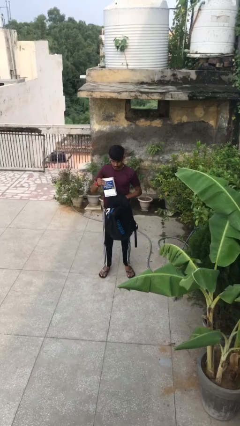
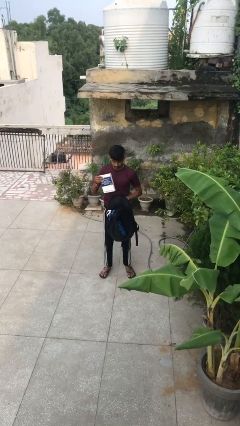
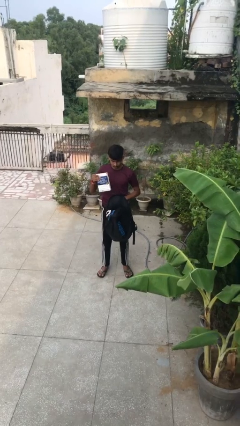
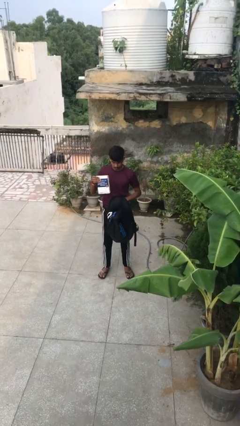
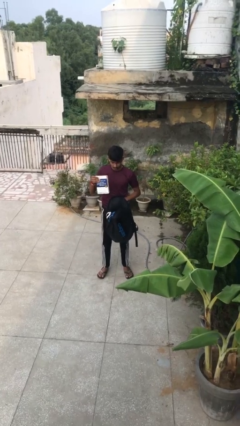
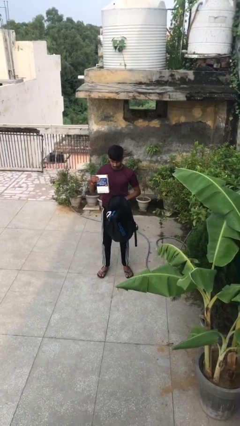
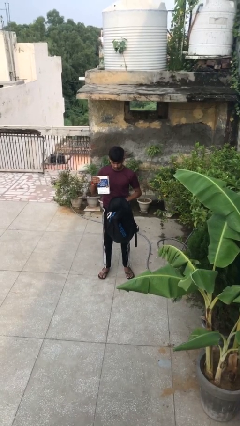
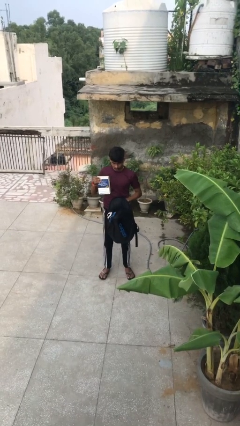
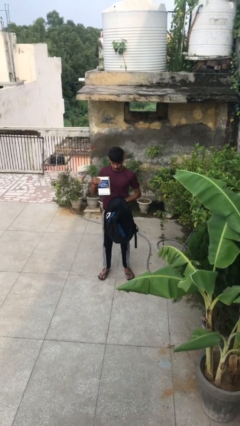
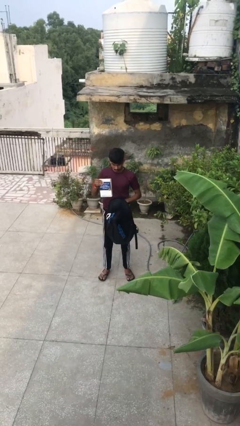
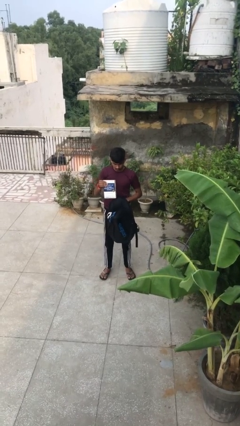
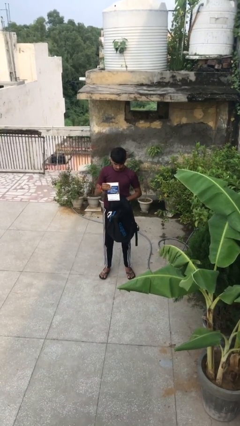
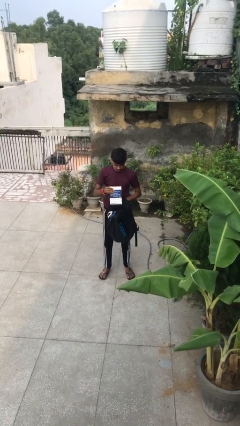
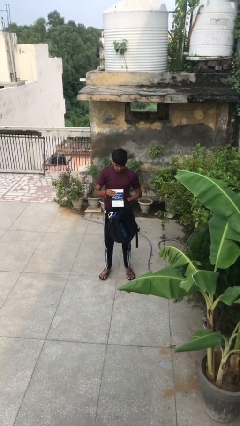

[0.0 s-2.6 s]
person takes object from backpack

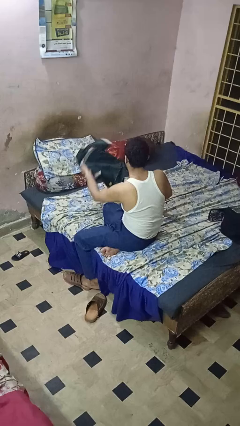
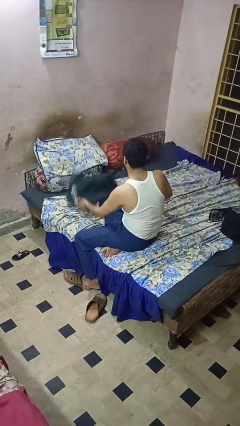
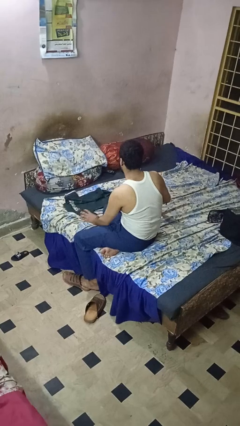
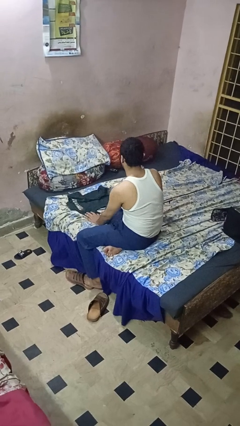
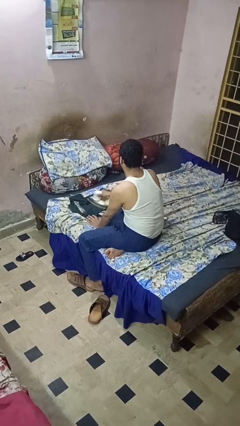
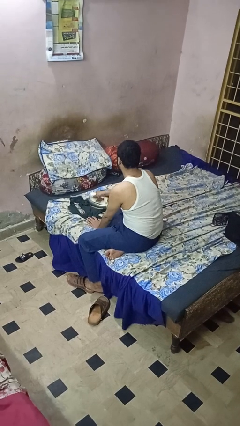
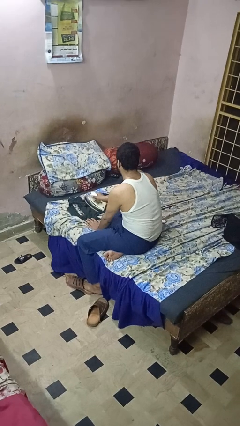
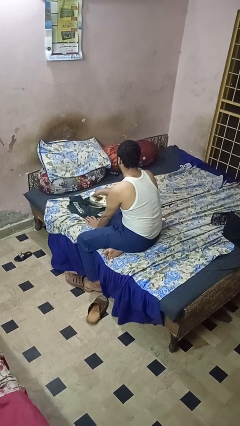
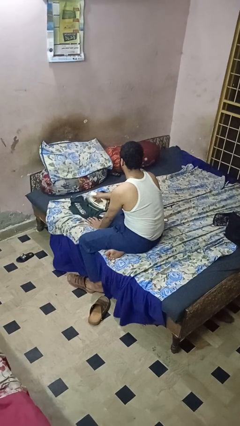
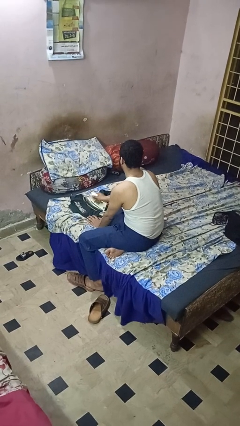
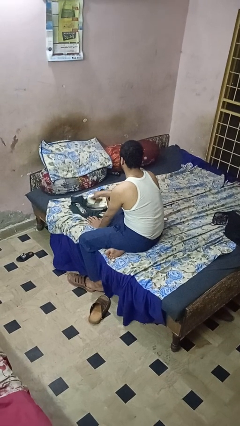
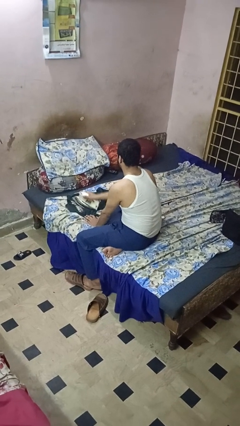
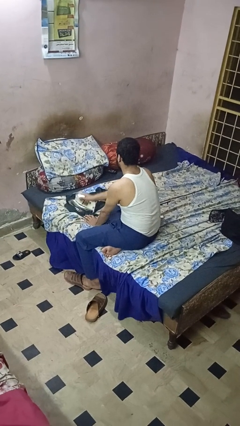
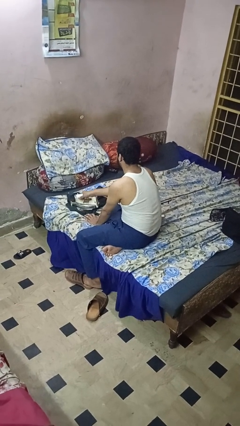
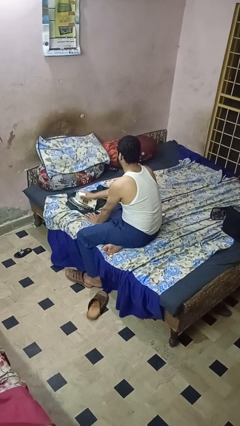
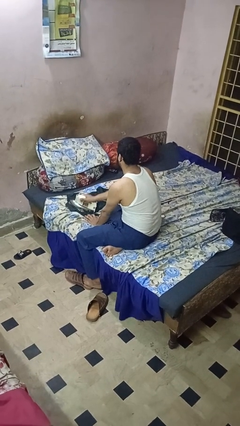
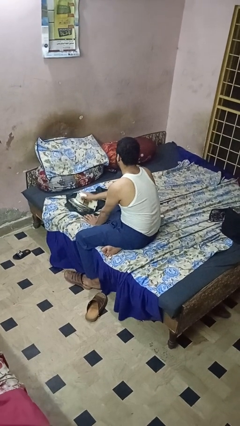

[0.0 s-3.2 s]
person irons clothes

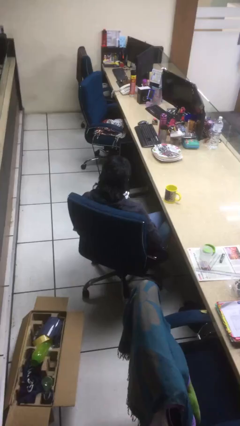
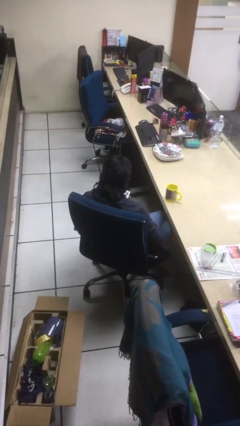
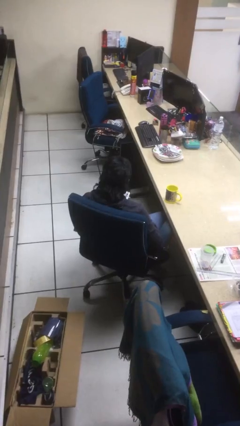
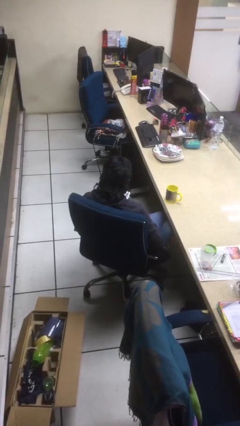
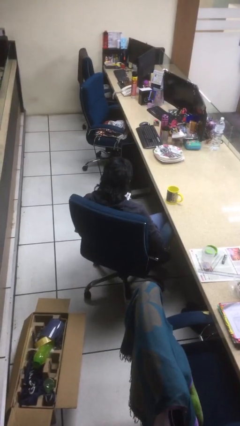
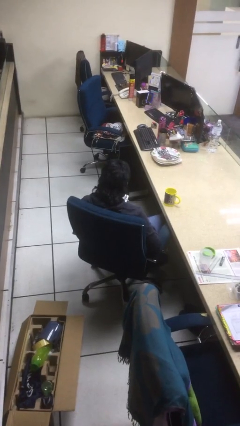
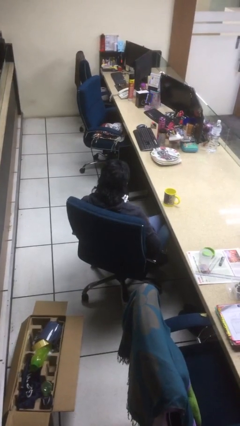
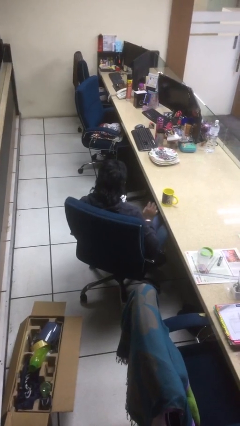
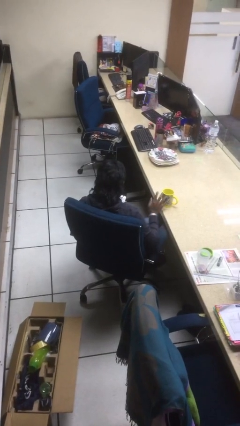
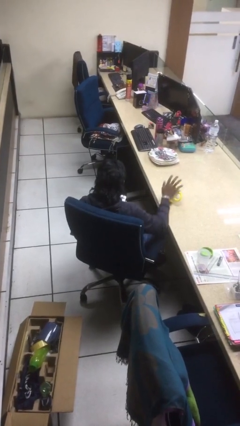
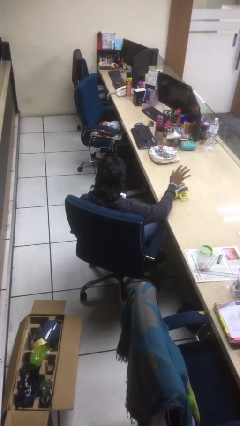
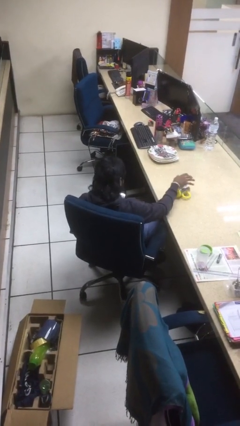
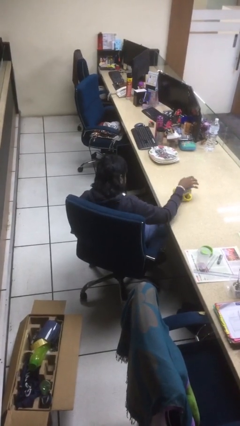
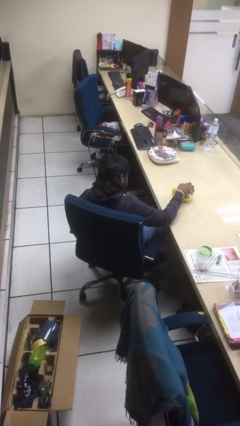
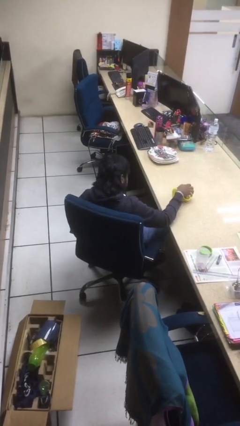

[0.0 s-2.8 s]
person knocks over glass

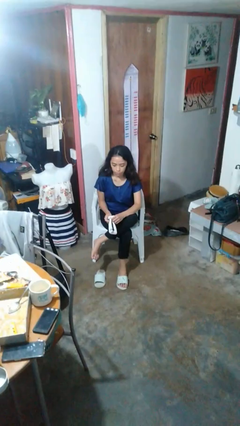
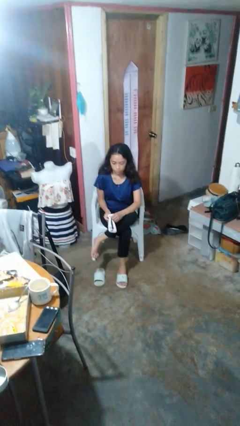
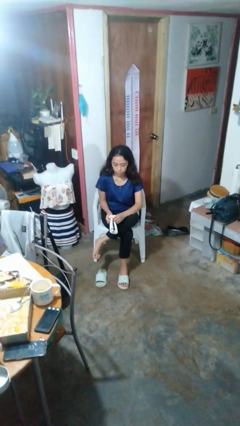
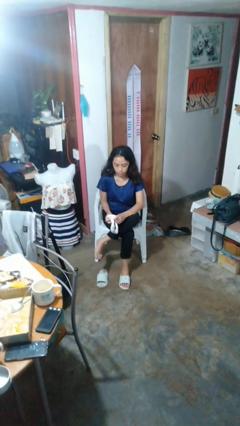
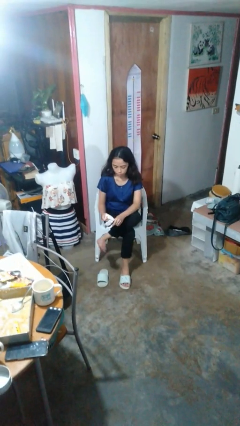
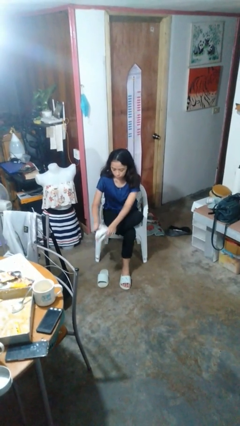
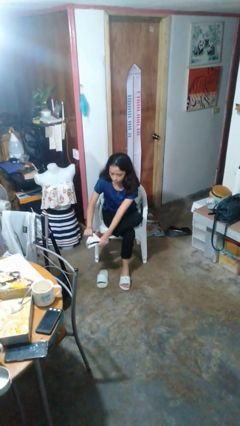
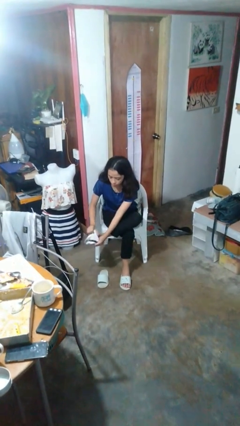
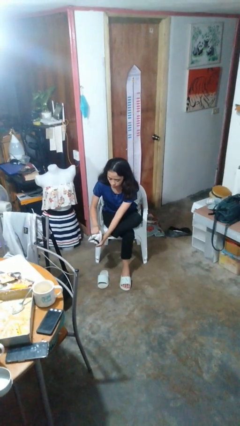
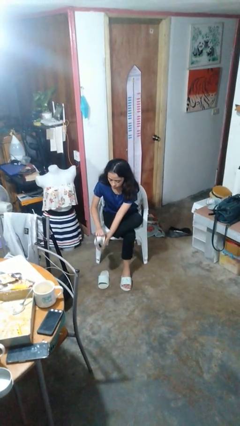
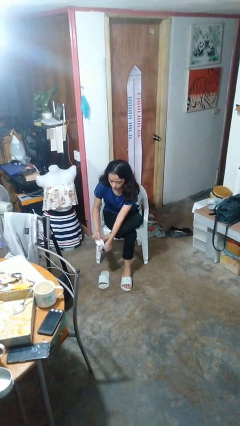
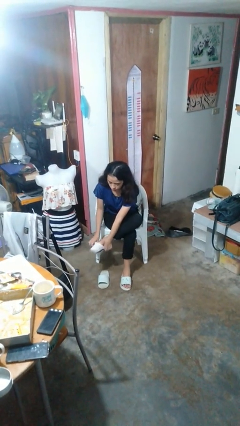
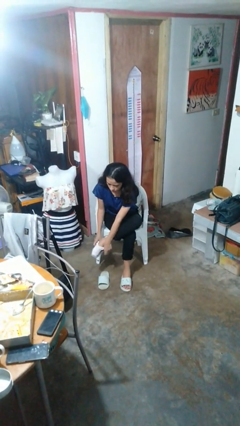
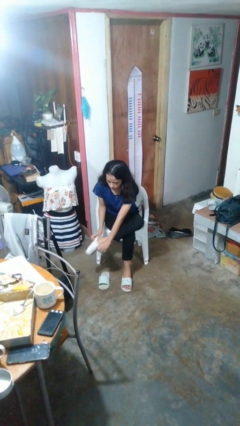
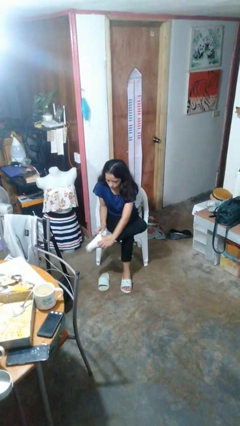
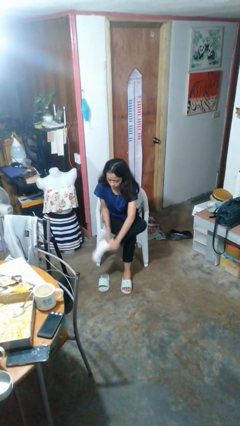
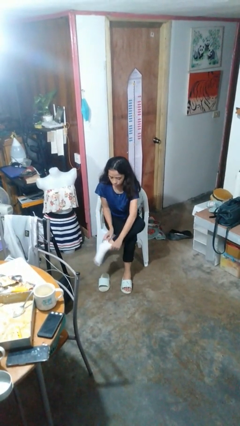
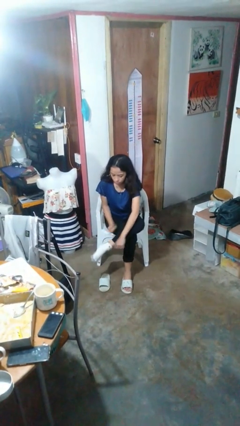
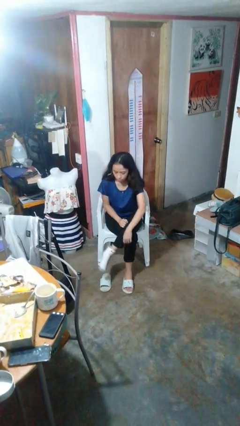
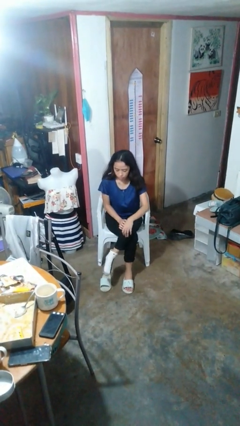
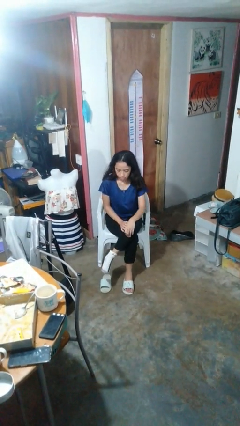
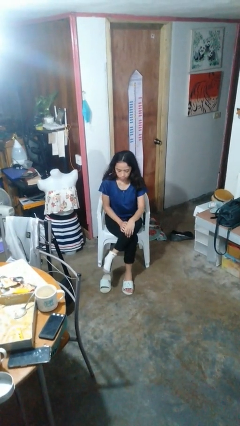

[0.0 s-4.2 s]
person puts on socks

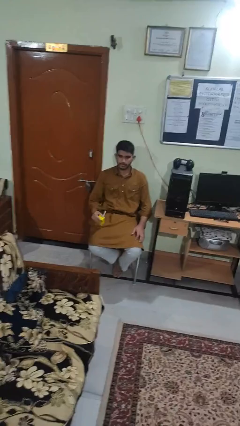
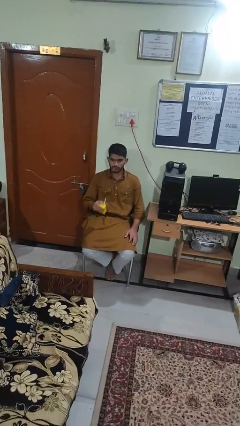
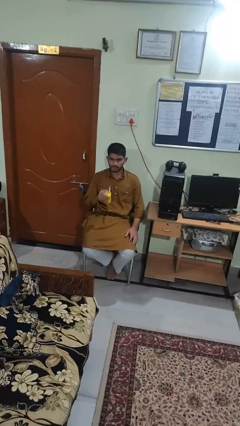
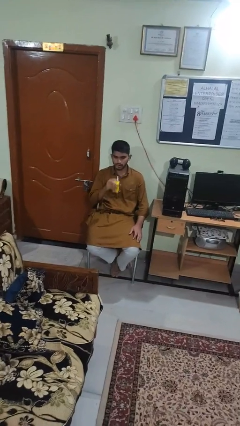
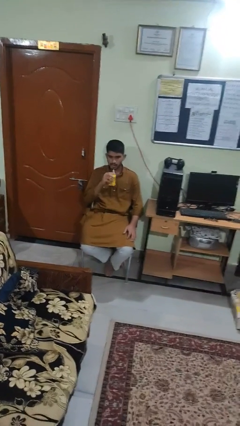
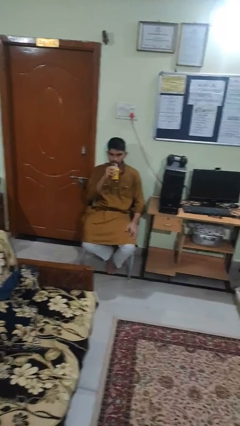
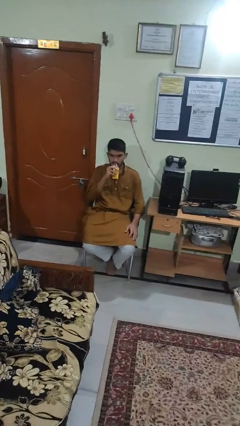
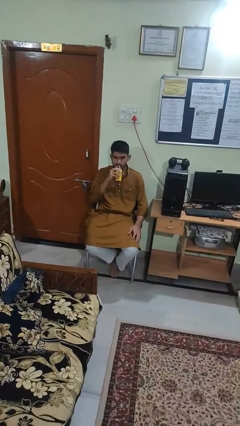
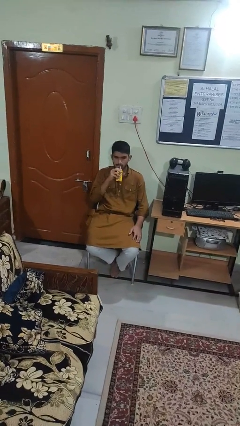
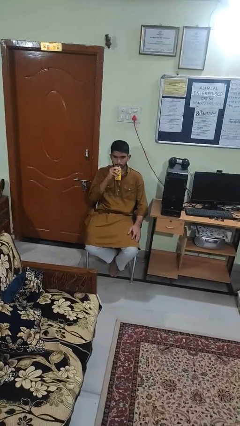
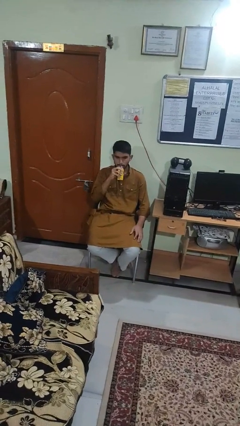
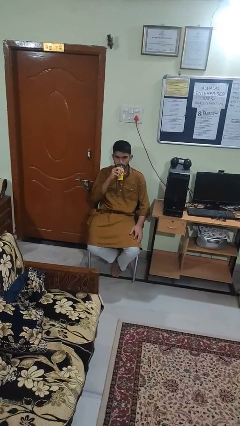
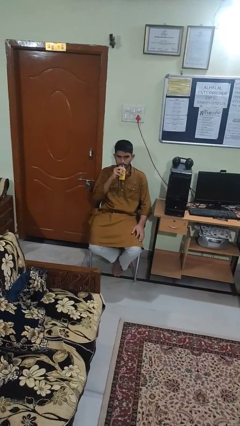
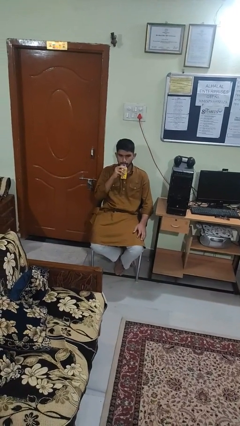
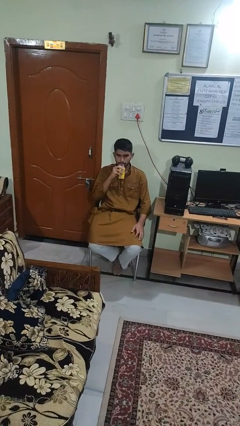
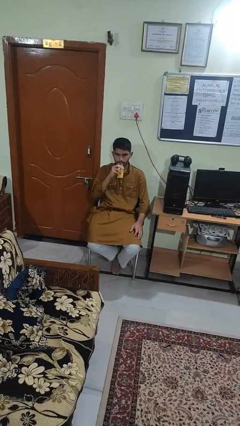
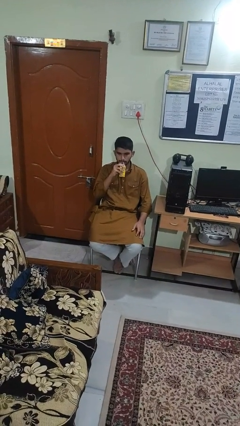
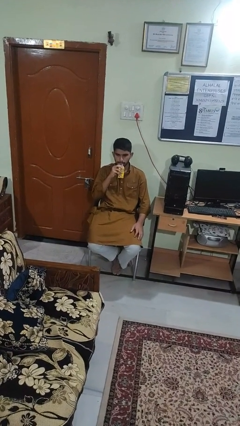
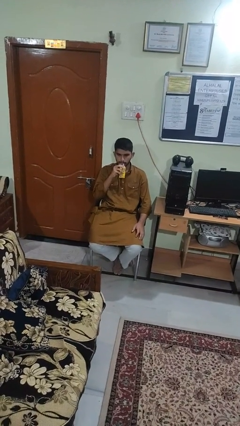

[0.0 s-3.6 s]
person drinks from straw

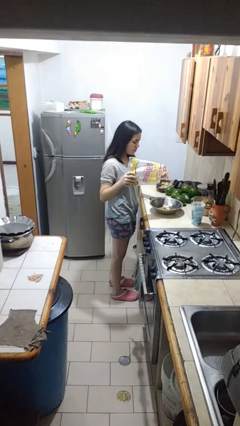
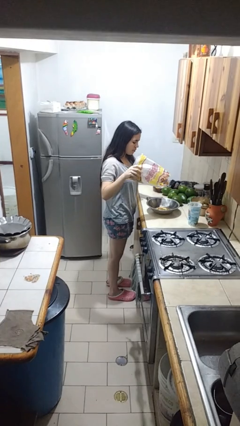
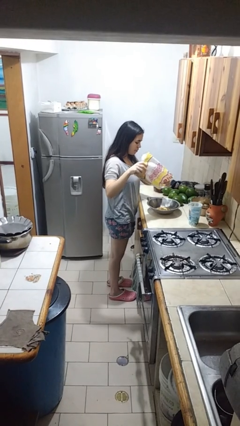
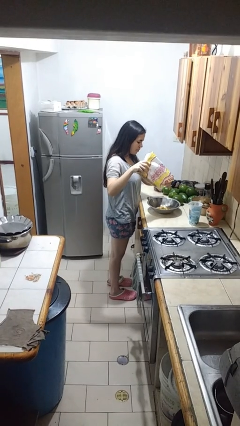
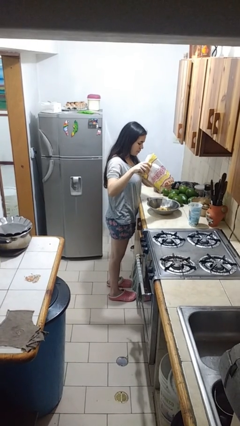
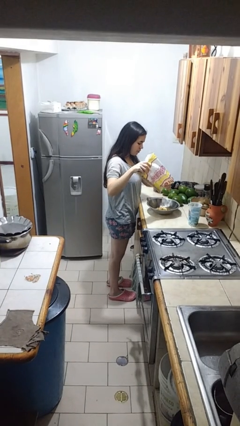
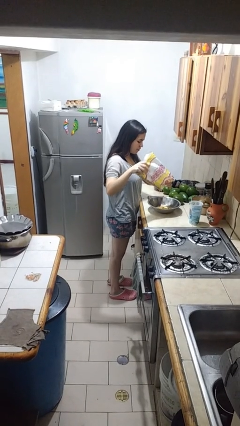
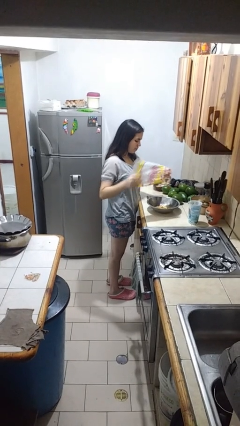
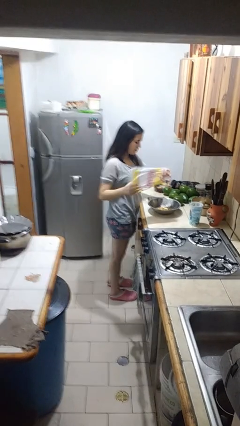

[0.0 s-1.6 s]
person pours into bowl
